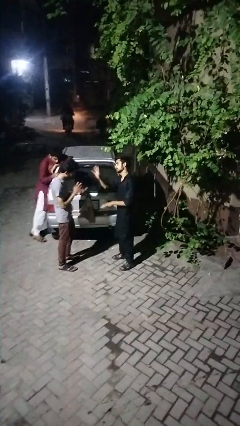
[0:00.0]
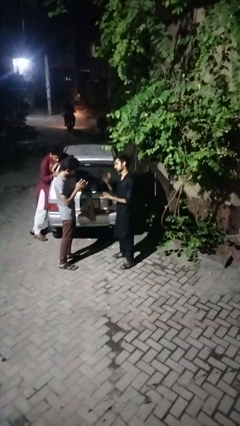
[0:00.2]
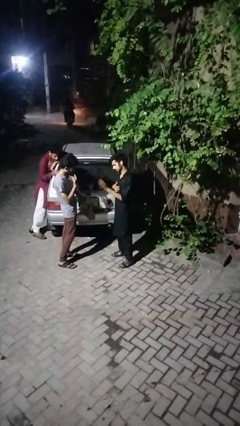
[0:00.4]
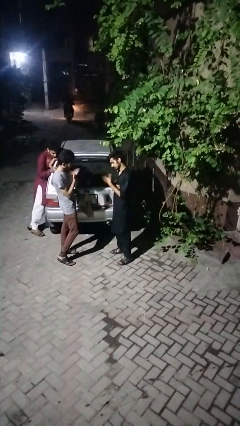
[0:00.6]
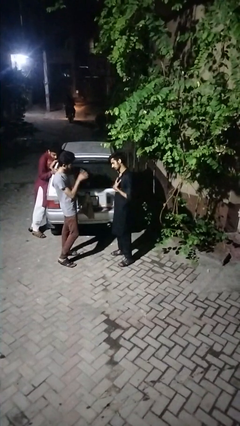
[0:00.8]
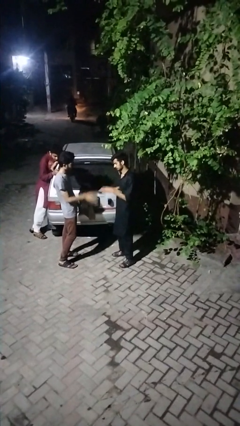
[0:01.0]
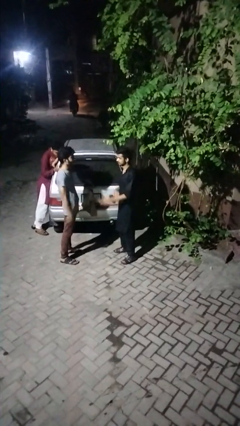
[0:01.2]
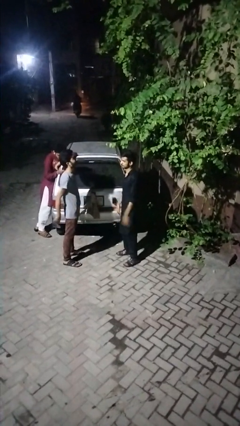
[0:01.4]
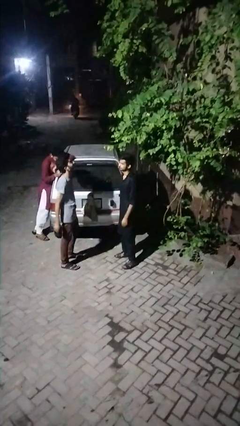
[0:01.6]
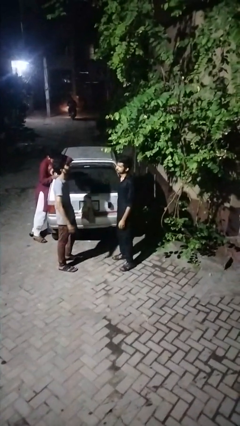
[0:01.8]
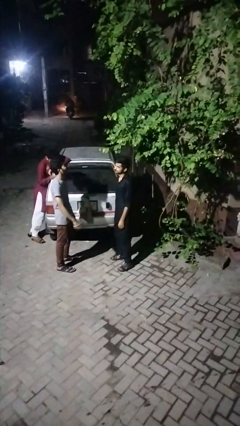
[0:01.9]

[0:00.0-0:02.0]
person talks to person

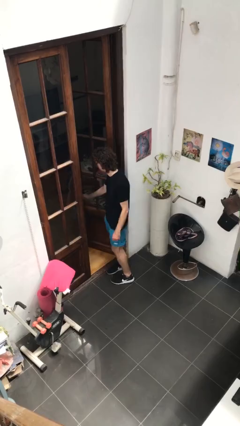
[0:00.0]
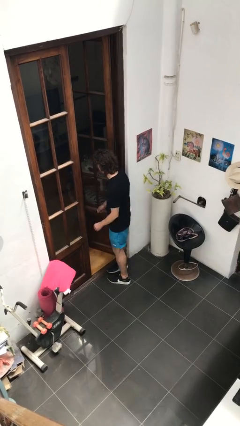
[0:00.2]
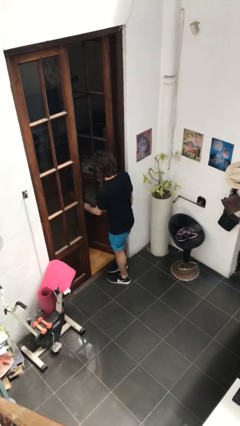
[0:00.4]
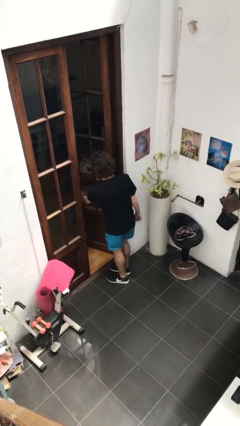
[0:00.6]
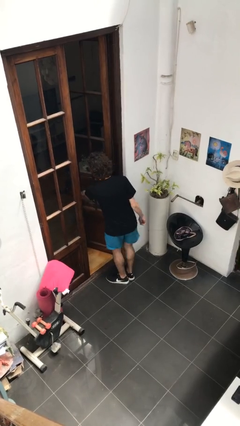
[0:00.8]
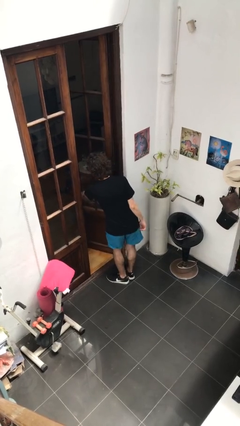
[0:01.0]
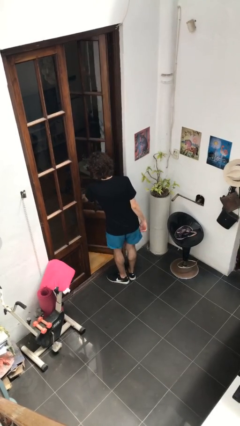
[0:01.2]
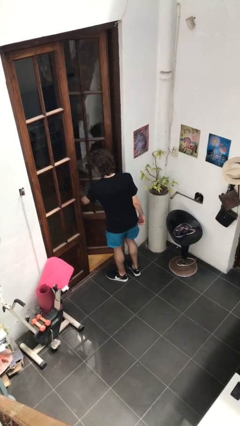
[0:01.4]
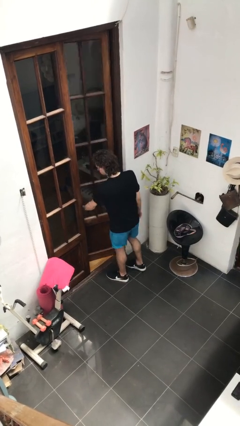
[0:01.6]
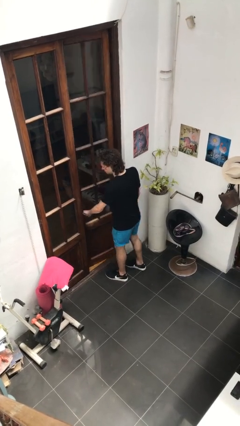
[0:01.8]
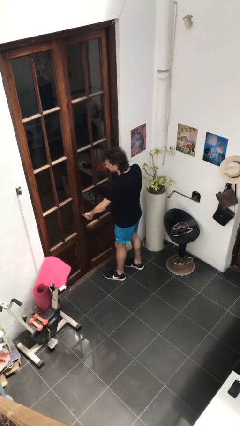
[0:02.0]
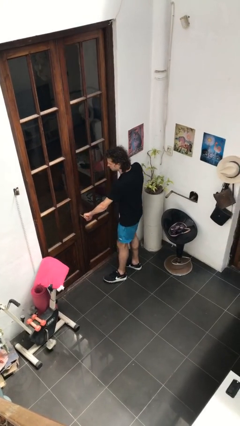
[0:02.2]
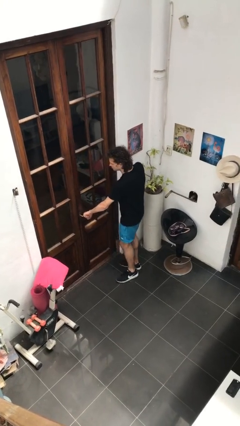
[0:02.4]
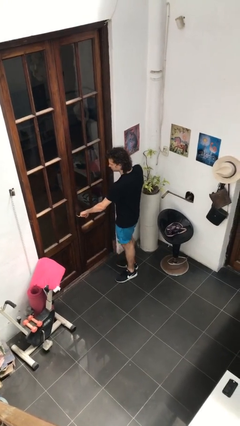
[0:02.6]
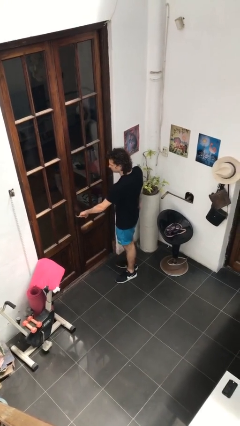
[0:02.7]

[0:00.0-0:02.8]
person closes facility door

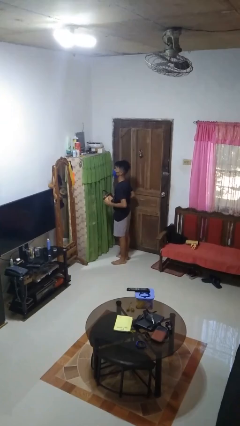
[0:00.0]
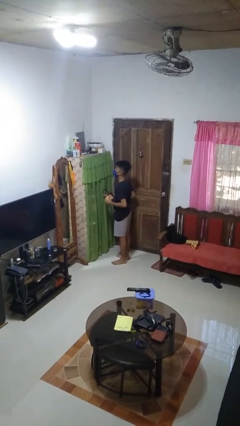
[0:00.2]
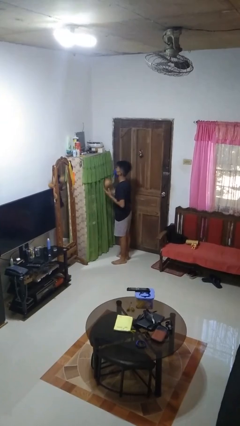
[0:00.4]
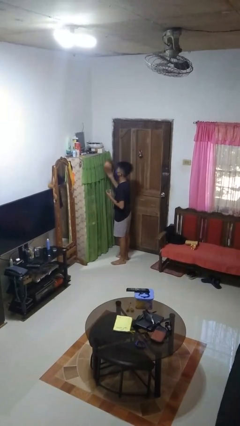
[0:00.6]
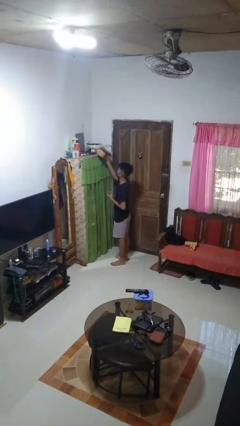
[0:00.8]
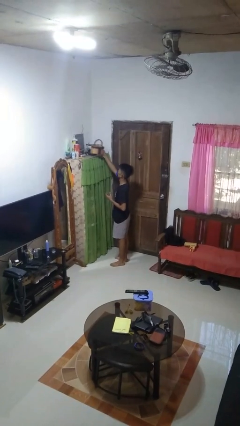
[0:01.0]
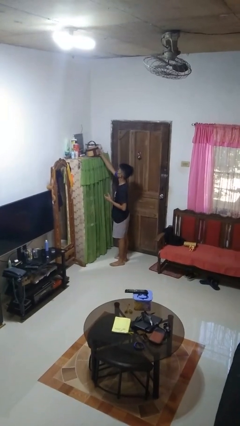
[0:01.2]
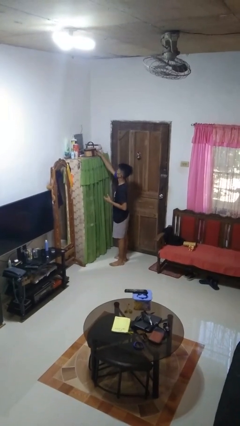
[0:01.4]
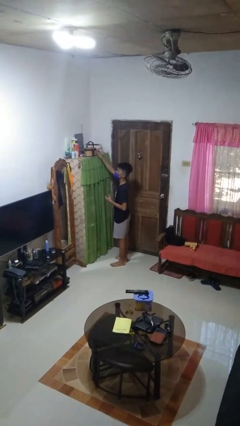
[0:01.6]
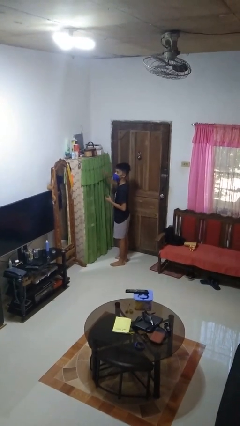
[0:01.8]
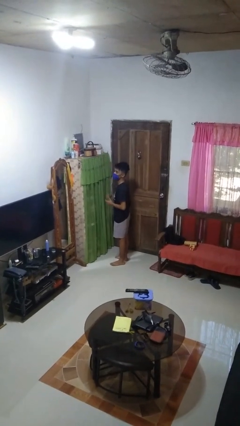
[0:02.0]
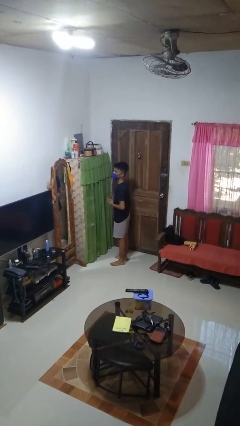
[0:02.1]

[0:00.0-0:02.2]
person puts down object on shelf

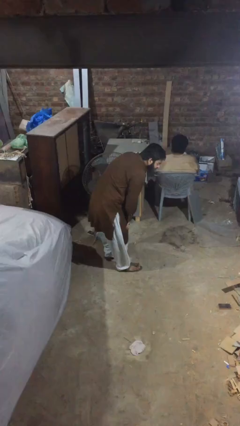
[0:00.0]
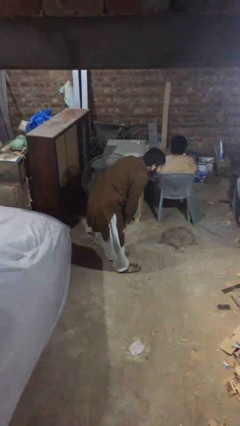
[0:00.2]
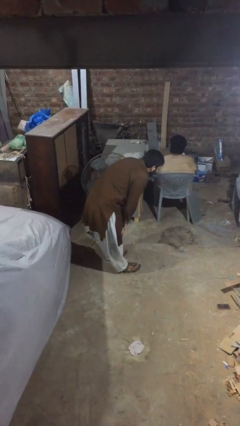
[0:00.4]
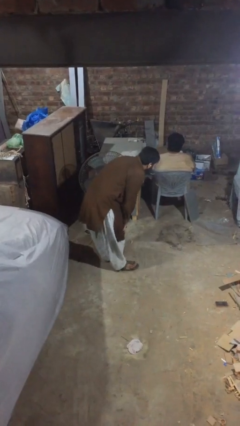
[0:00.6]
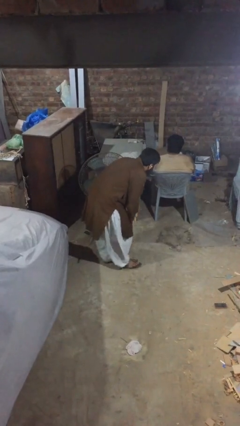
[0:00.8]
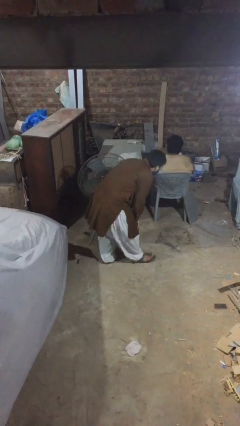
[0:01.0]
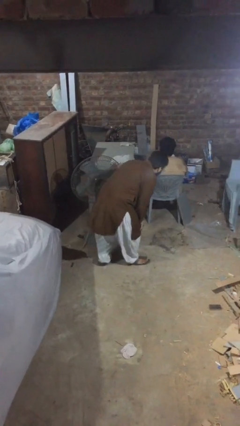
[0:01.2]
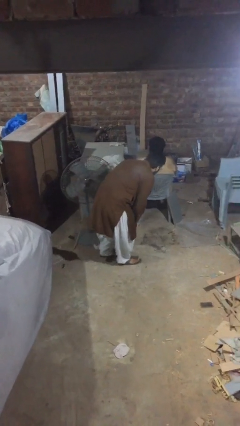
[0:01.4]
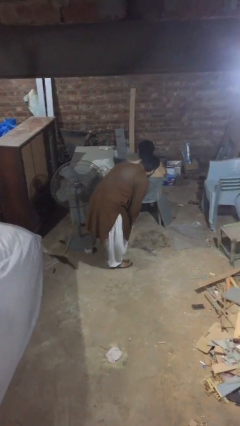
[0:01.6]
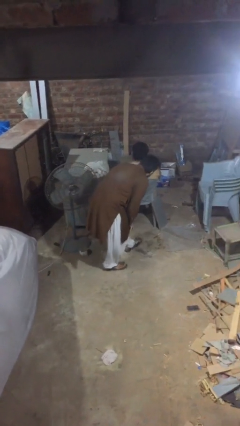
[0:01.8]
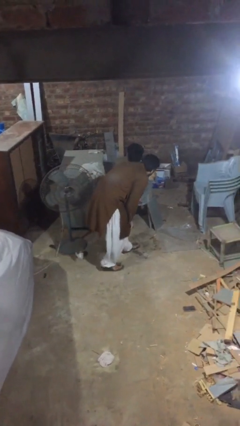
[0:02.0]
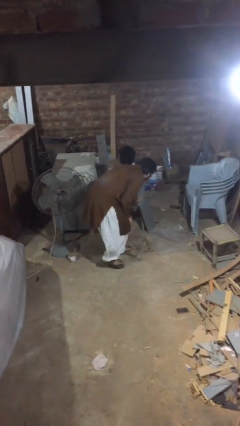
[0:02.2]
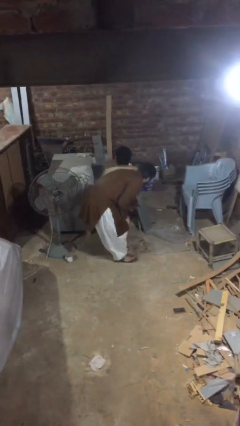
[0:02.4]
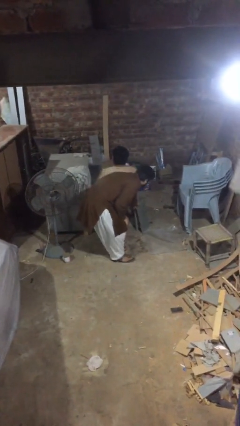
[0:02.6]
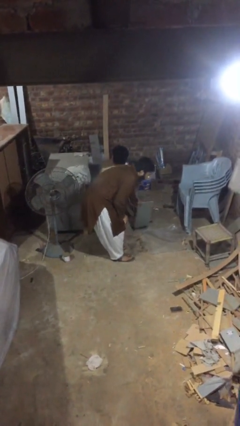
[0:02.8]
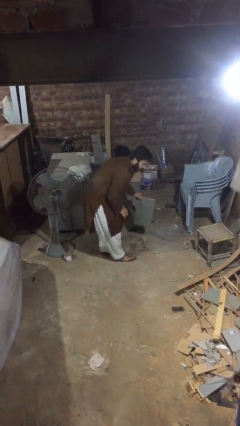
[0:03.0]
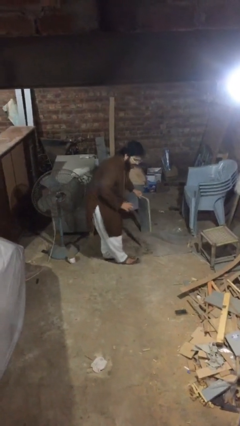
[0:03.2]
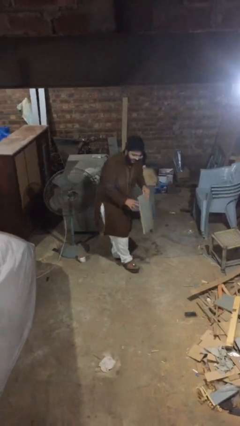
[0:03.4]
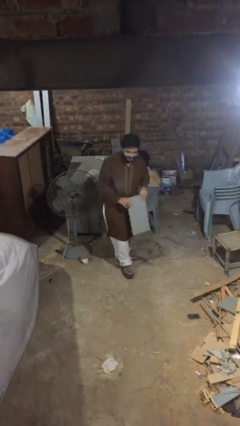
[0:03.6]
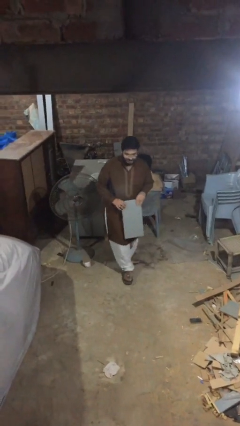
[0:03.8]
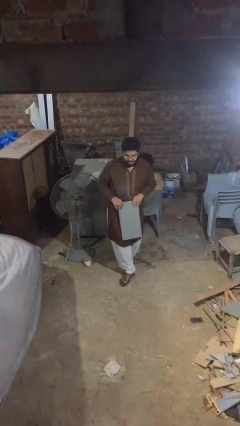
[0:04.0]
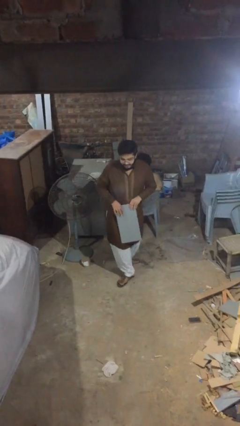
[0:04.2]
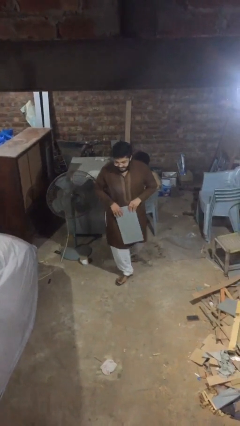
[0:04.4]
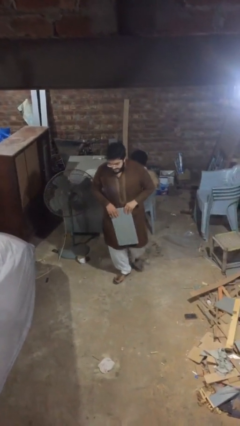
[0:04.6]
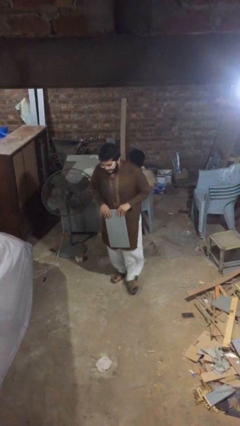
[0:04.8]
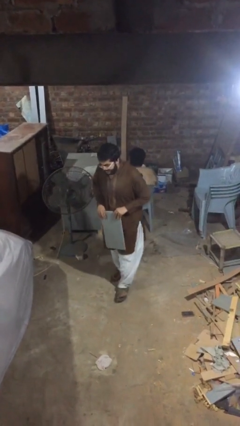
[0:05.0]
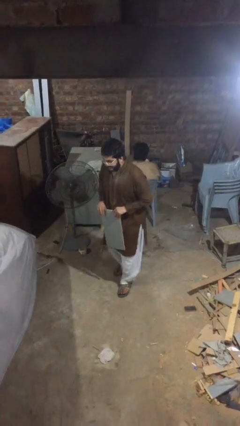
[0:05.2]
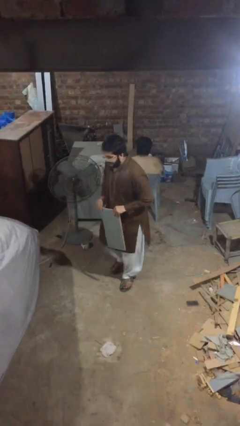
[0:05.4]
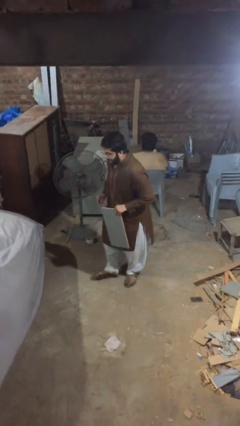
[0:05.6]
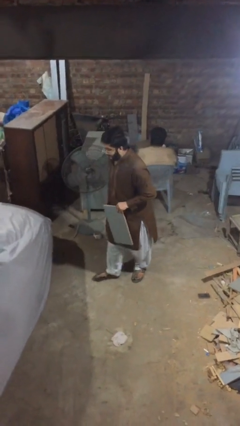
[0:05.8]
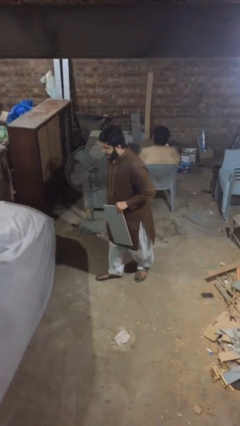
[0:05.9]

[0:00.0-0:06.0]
person steals object from person

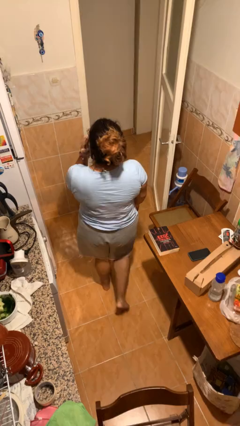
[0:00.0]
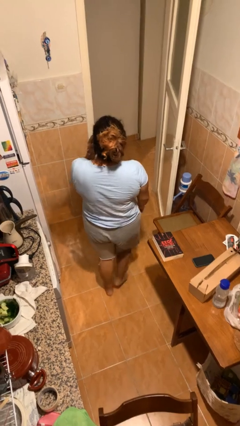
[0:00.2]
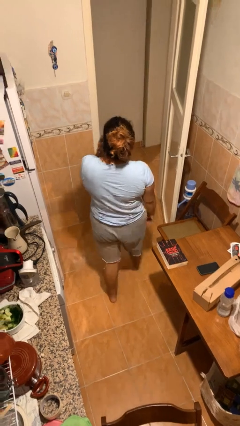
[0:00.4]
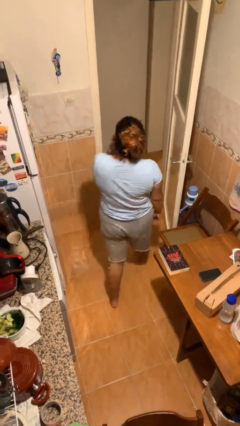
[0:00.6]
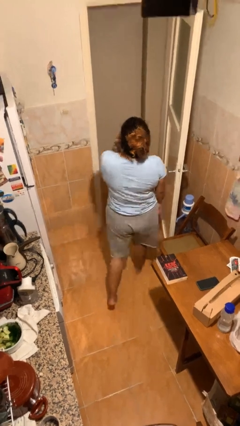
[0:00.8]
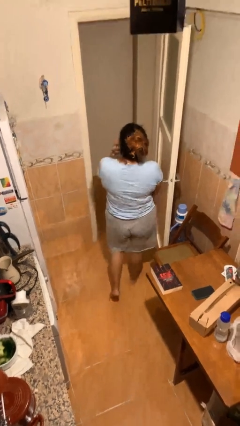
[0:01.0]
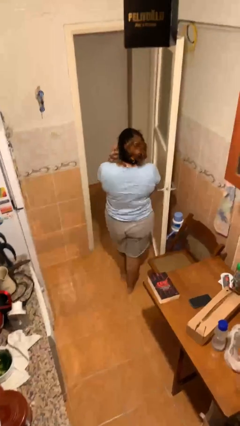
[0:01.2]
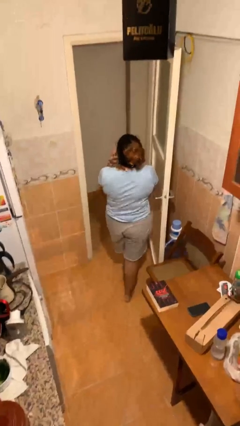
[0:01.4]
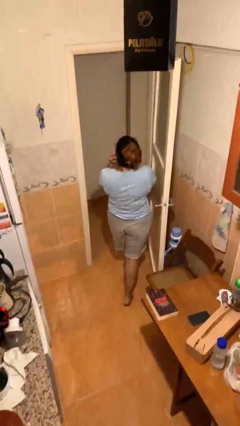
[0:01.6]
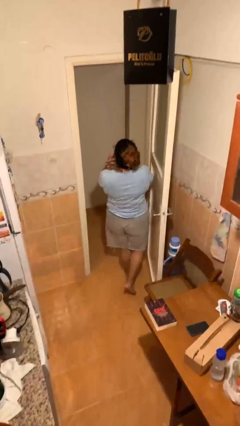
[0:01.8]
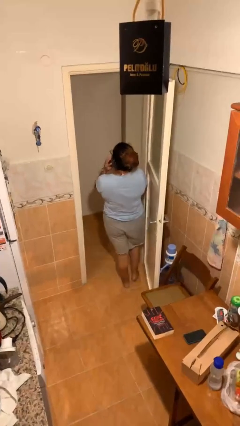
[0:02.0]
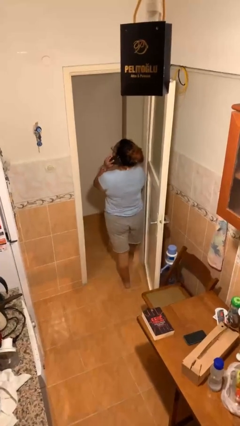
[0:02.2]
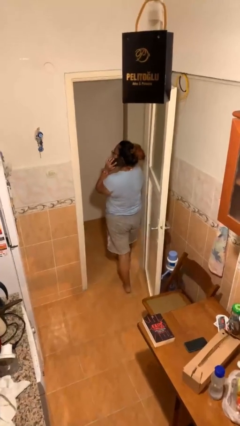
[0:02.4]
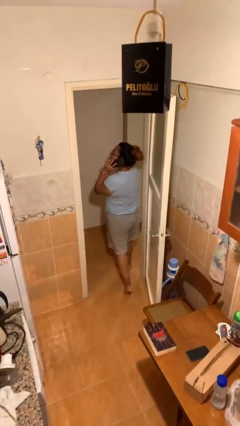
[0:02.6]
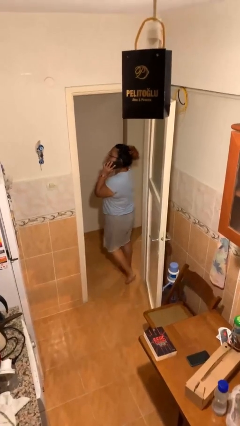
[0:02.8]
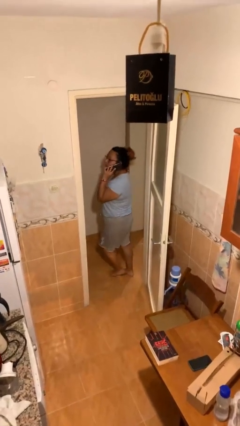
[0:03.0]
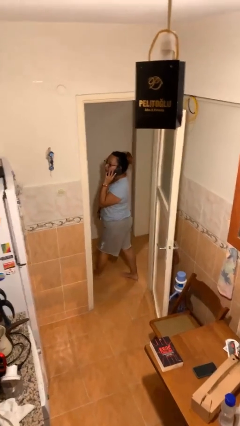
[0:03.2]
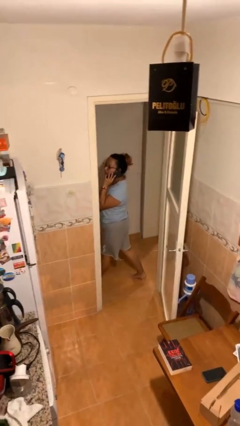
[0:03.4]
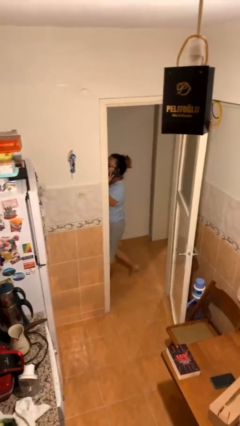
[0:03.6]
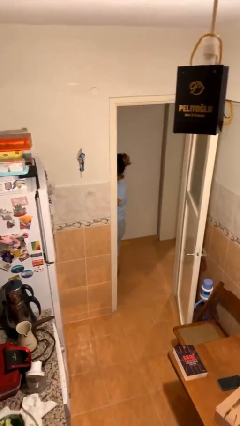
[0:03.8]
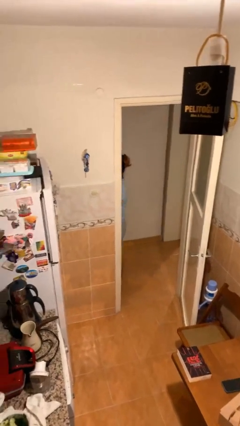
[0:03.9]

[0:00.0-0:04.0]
person exits scene through structure

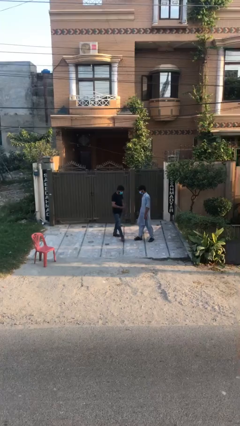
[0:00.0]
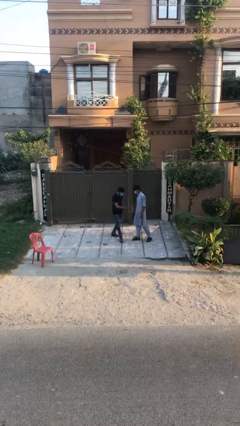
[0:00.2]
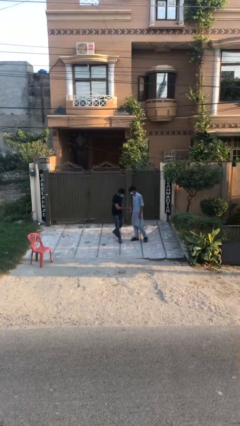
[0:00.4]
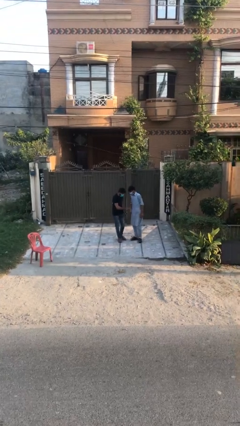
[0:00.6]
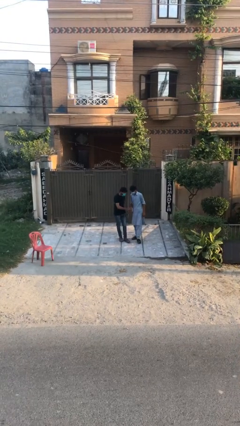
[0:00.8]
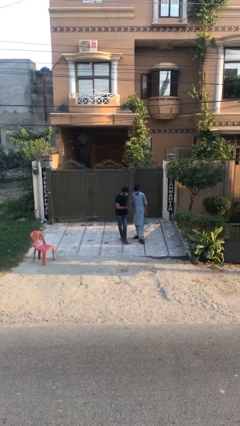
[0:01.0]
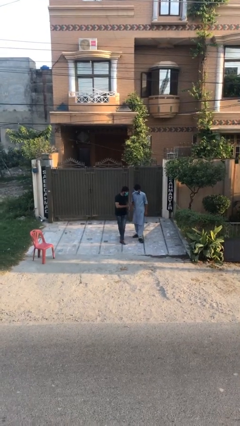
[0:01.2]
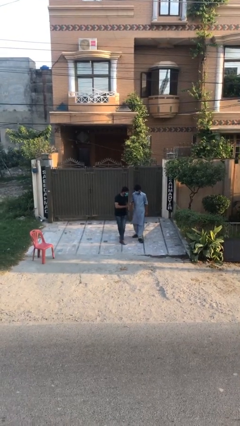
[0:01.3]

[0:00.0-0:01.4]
person shakes hand
